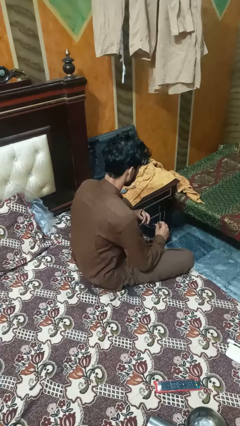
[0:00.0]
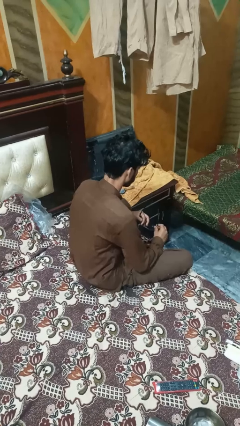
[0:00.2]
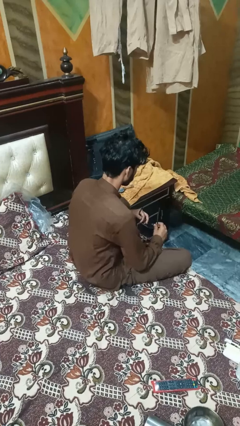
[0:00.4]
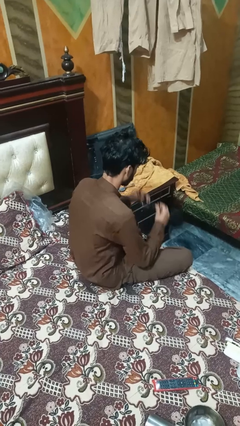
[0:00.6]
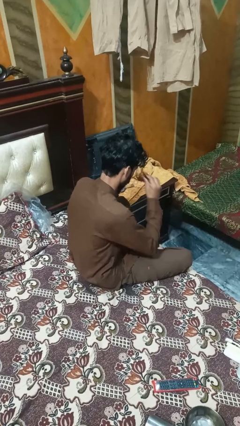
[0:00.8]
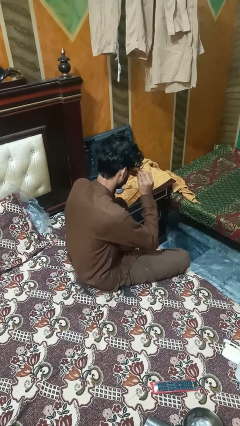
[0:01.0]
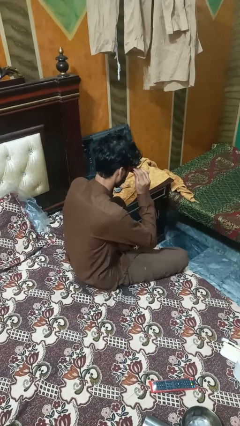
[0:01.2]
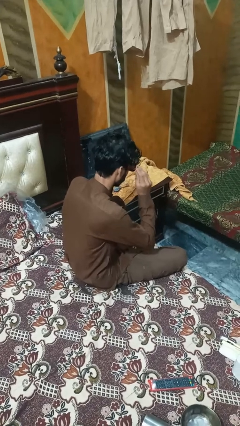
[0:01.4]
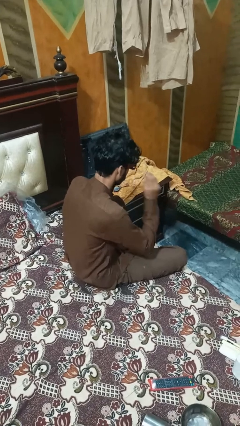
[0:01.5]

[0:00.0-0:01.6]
person puts on sunglasses

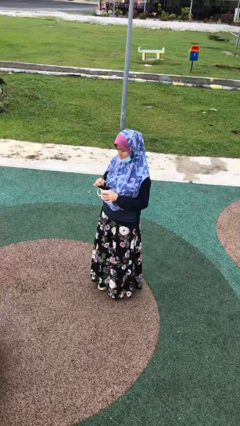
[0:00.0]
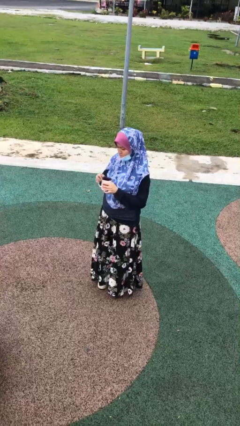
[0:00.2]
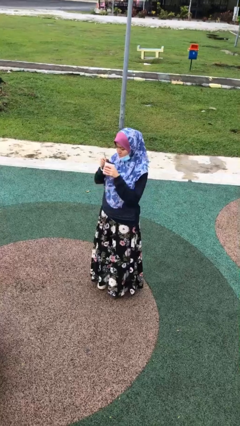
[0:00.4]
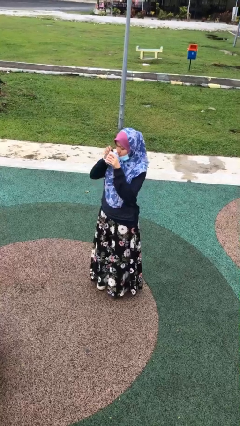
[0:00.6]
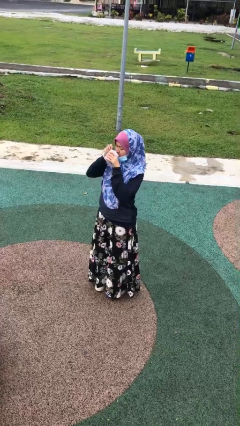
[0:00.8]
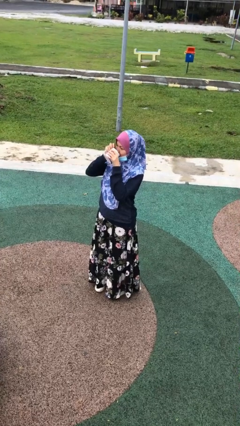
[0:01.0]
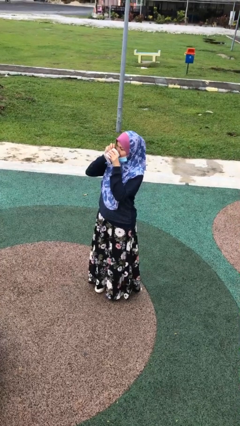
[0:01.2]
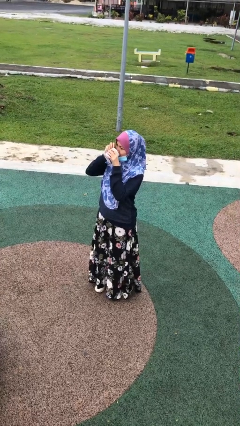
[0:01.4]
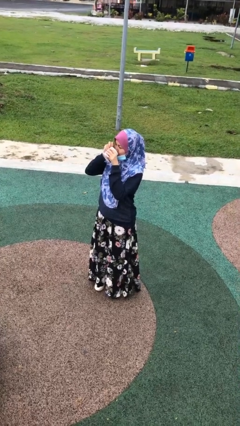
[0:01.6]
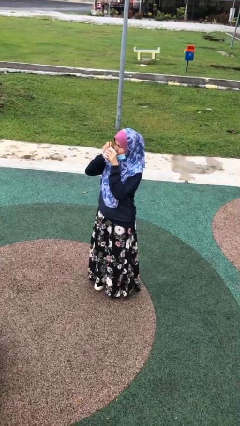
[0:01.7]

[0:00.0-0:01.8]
person drinks from mug

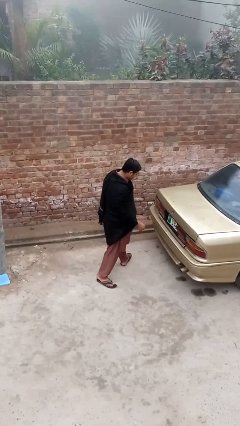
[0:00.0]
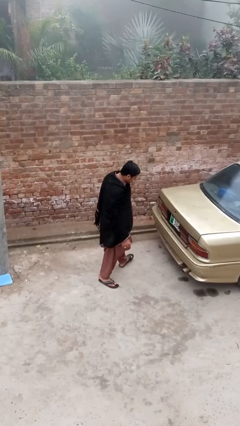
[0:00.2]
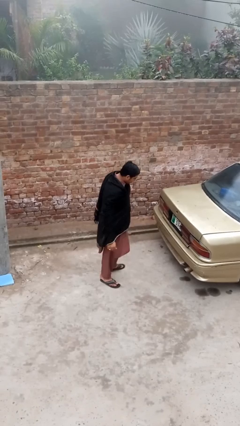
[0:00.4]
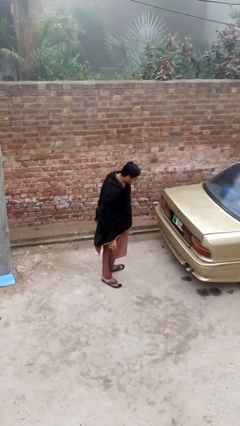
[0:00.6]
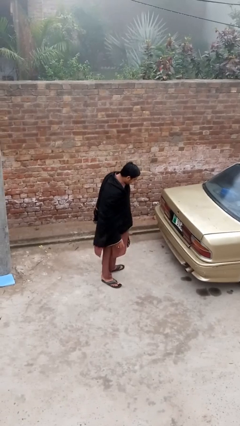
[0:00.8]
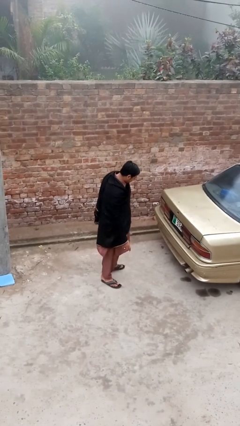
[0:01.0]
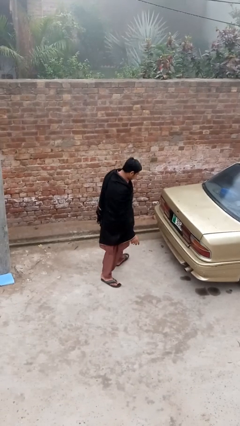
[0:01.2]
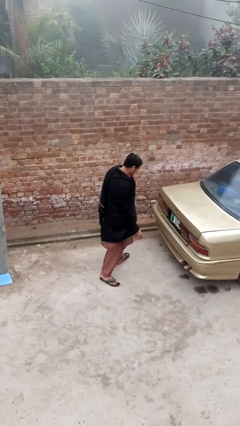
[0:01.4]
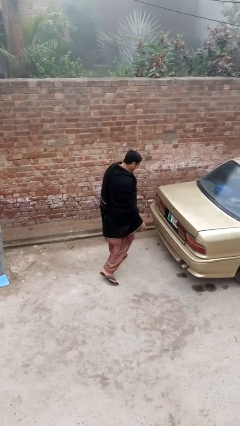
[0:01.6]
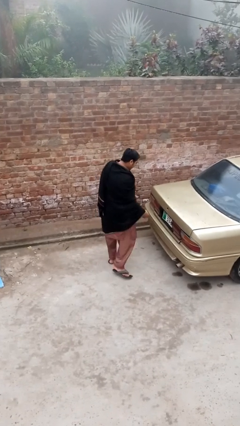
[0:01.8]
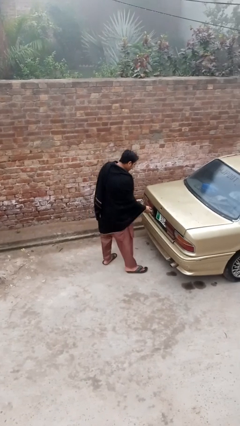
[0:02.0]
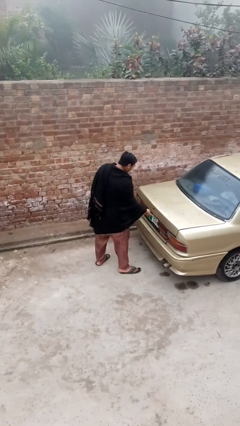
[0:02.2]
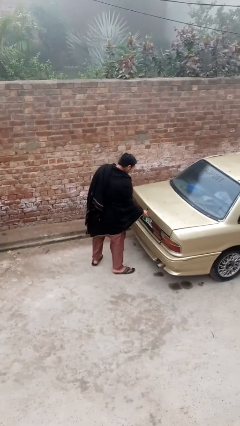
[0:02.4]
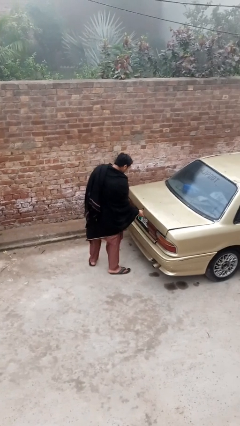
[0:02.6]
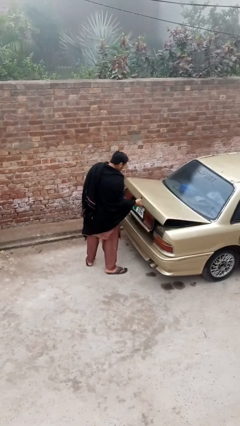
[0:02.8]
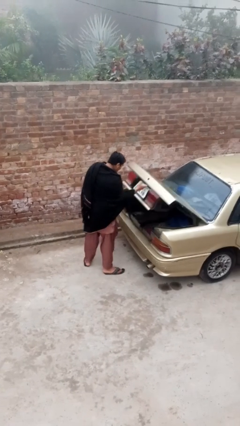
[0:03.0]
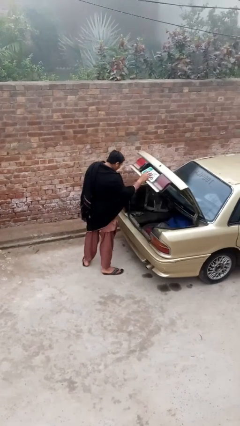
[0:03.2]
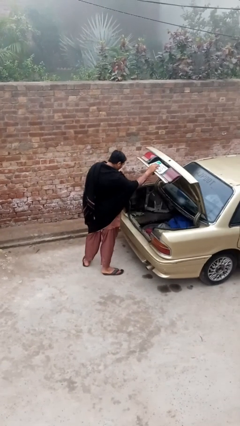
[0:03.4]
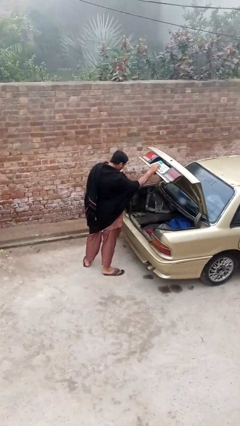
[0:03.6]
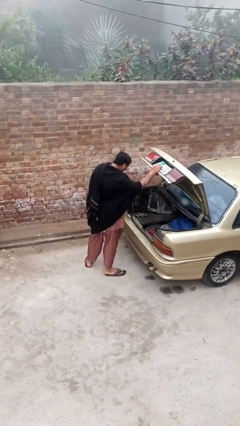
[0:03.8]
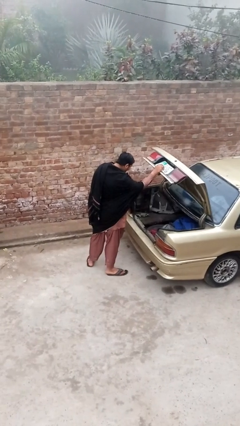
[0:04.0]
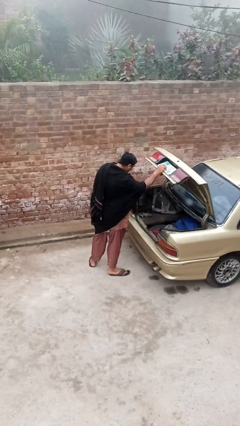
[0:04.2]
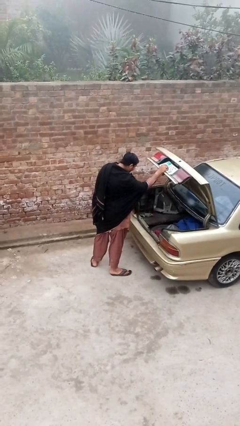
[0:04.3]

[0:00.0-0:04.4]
person opens car trunk

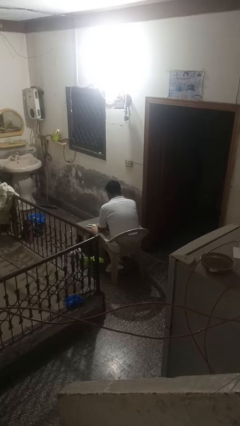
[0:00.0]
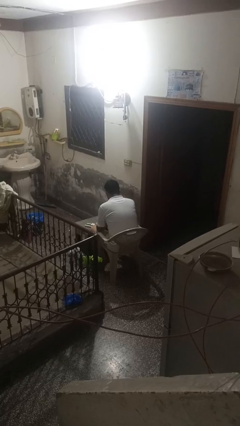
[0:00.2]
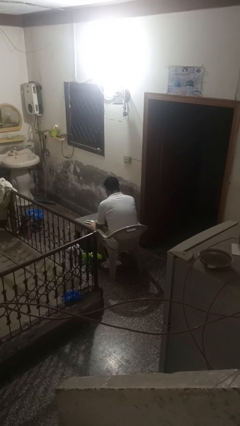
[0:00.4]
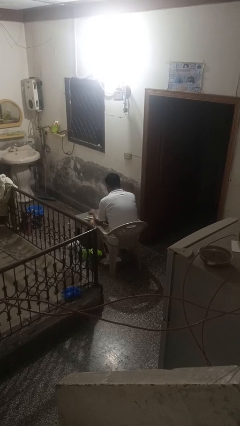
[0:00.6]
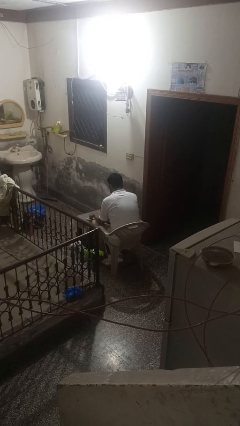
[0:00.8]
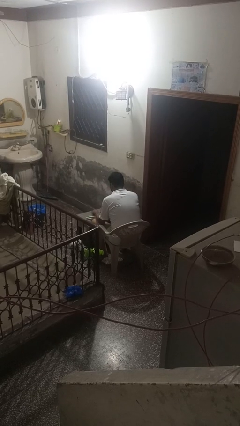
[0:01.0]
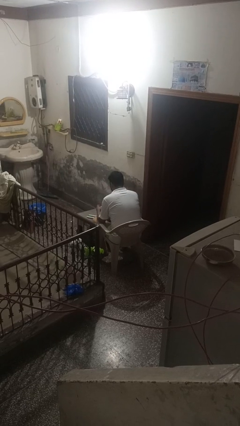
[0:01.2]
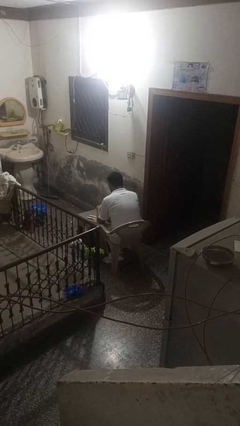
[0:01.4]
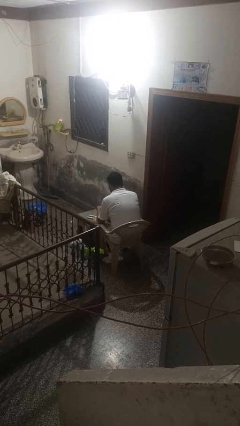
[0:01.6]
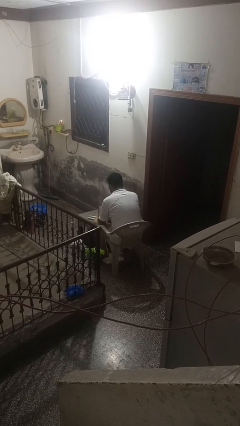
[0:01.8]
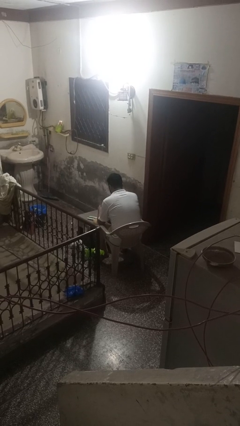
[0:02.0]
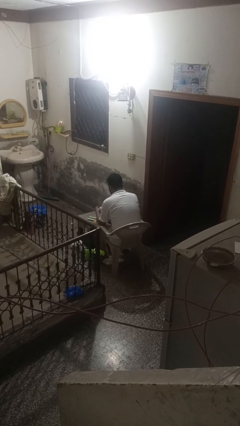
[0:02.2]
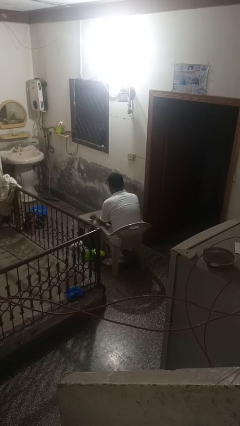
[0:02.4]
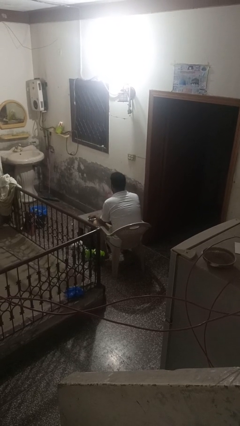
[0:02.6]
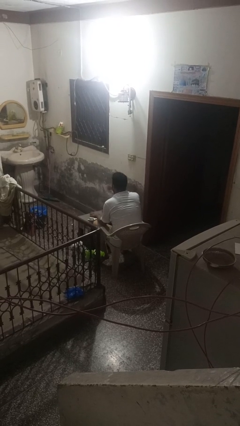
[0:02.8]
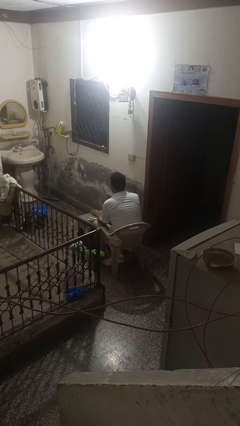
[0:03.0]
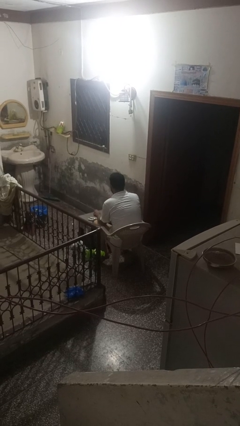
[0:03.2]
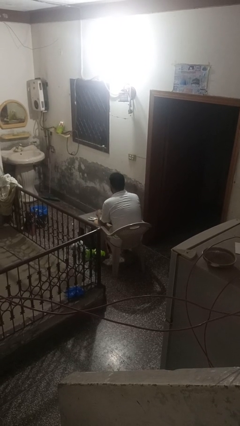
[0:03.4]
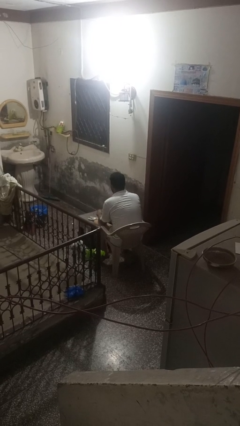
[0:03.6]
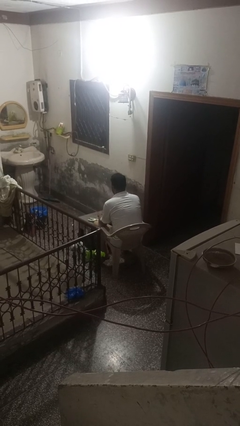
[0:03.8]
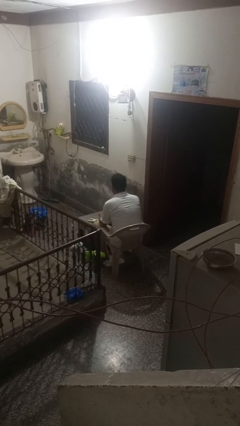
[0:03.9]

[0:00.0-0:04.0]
person takes medicine pills

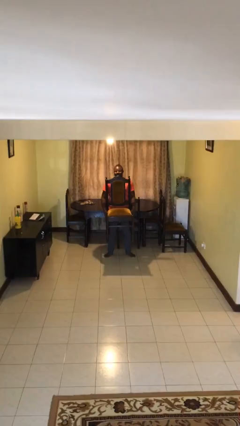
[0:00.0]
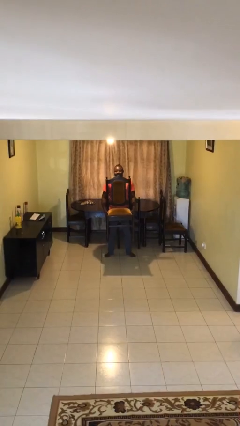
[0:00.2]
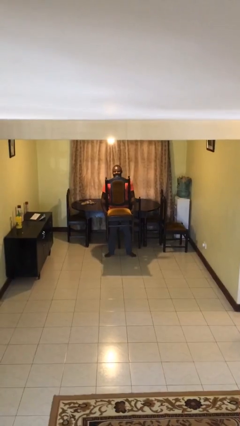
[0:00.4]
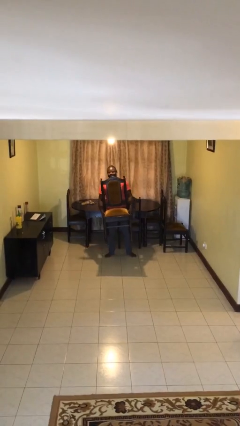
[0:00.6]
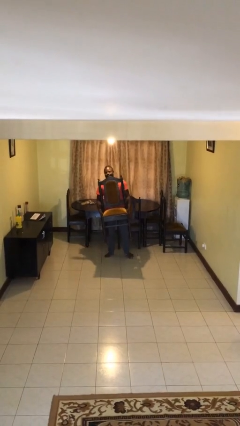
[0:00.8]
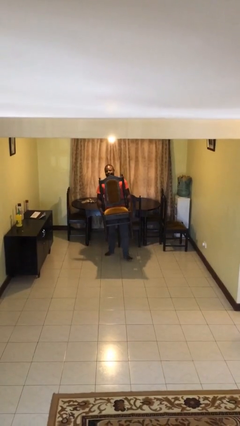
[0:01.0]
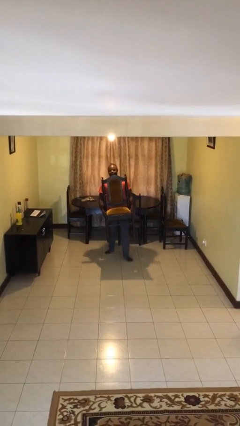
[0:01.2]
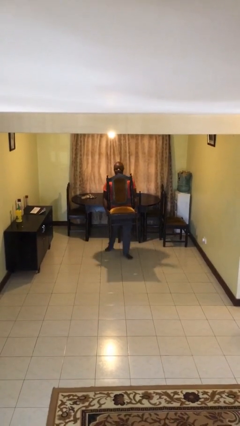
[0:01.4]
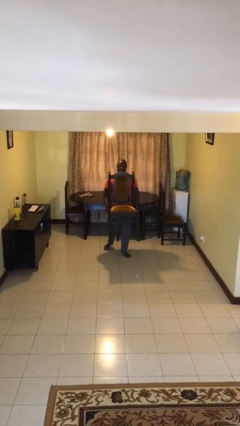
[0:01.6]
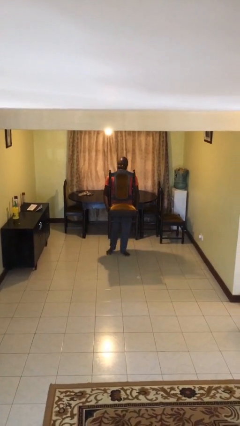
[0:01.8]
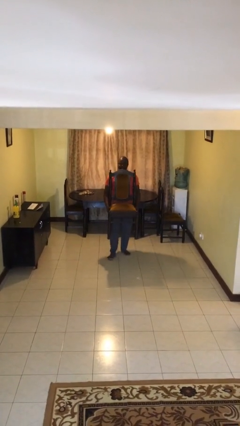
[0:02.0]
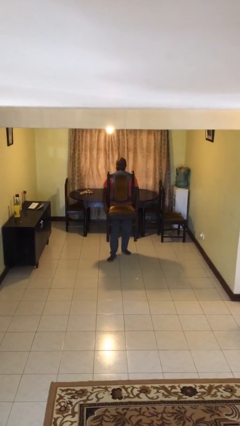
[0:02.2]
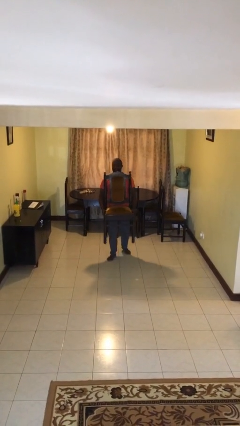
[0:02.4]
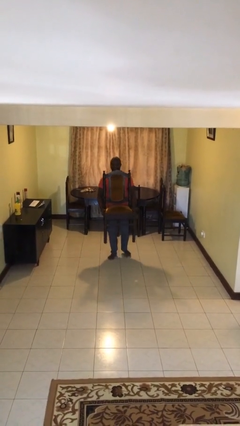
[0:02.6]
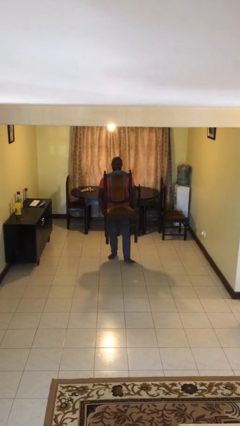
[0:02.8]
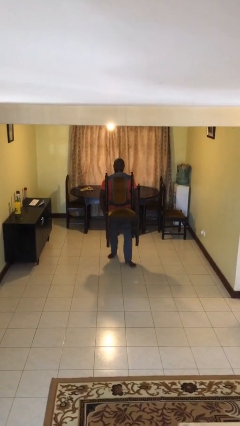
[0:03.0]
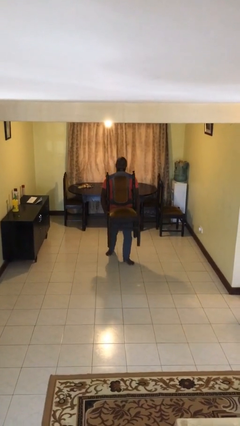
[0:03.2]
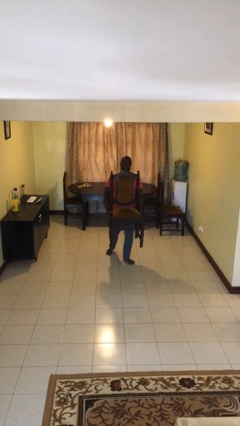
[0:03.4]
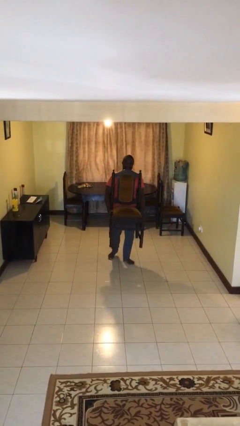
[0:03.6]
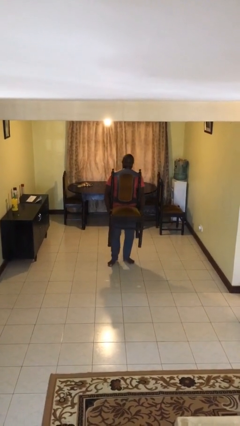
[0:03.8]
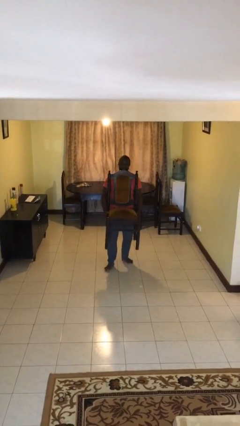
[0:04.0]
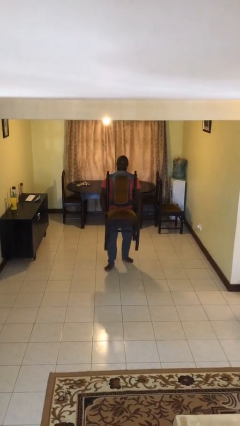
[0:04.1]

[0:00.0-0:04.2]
person carries heavy object

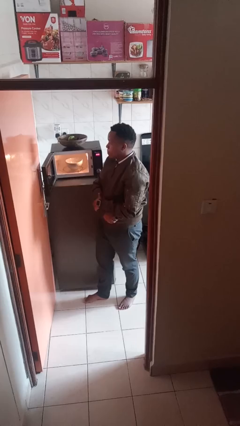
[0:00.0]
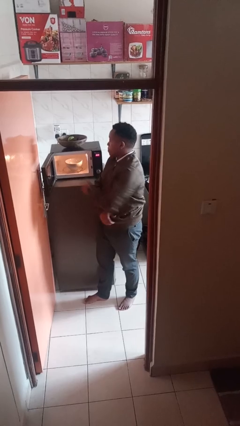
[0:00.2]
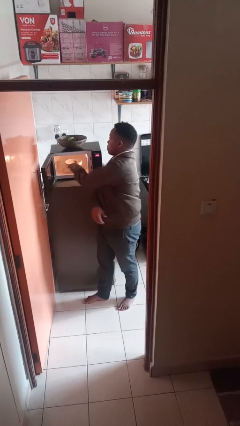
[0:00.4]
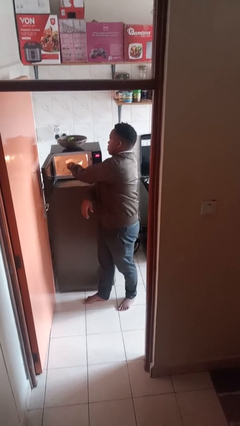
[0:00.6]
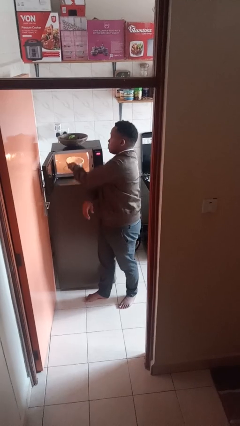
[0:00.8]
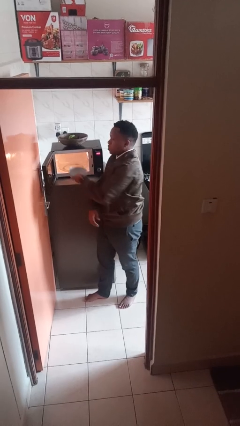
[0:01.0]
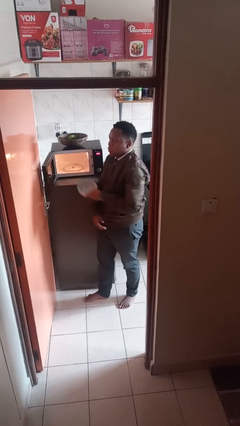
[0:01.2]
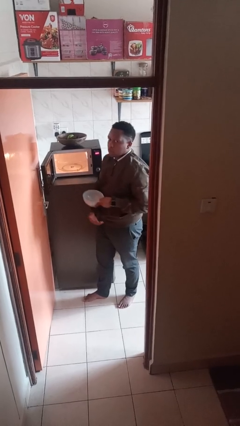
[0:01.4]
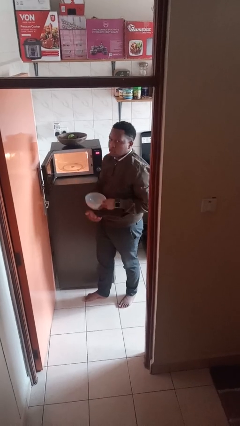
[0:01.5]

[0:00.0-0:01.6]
person takes object from microwave
